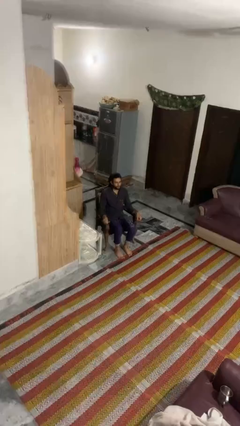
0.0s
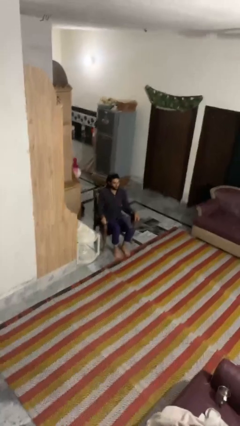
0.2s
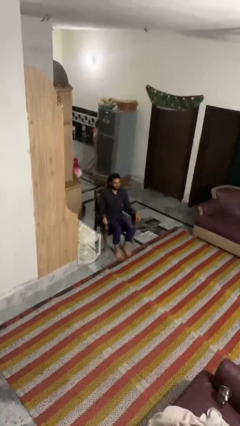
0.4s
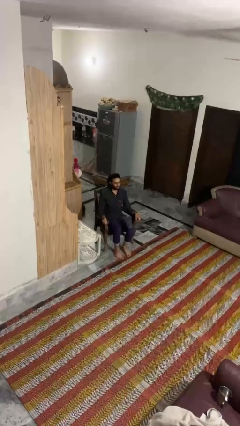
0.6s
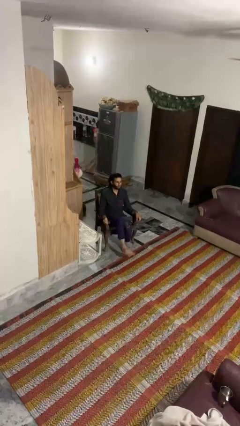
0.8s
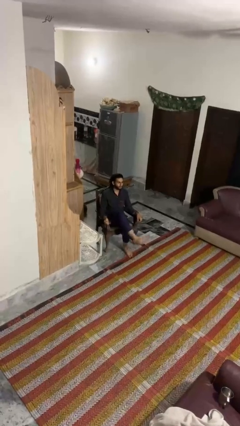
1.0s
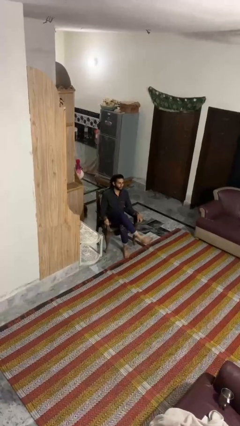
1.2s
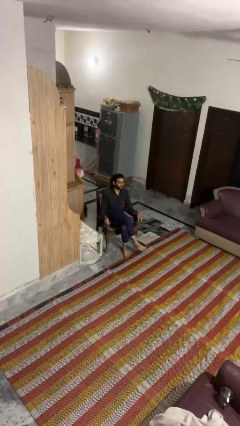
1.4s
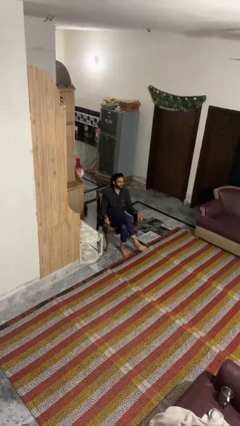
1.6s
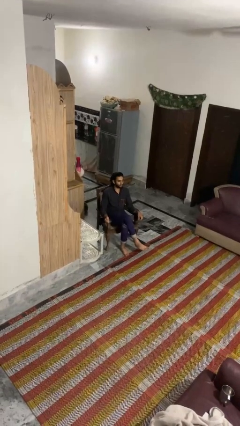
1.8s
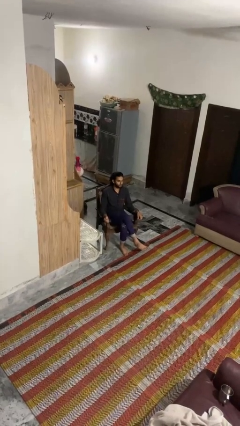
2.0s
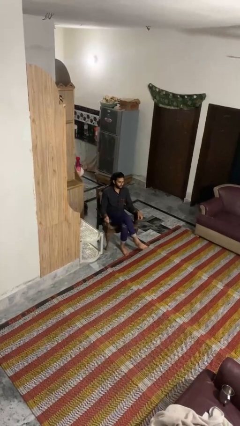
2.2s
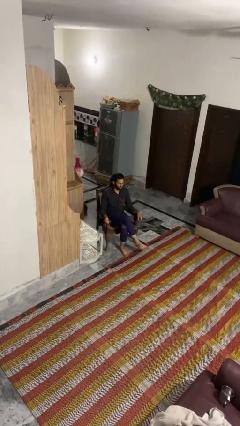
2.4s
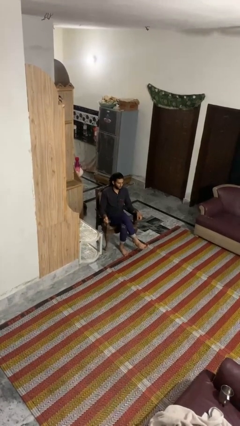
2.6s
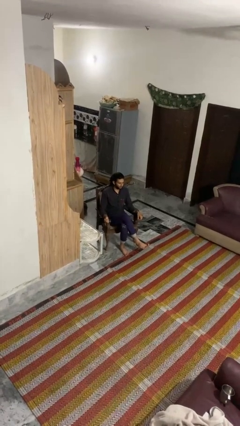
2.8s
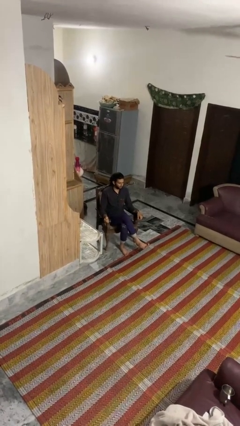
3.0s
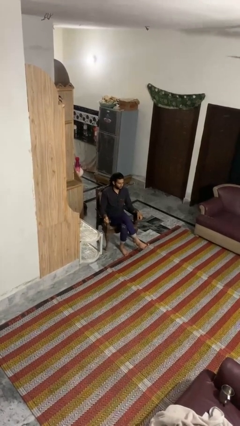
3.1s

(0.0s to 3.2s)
person crosses legs

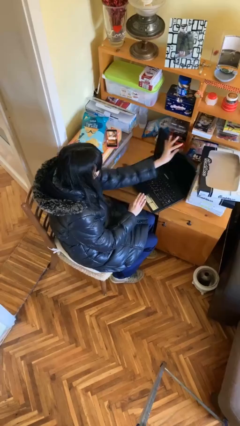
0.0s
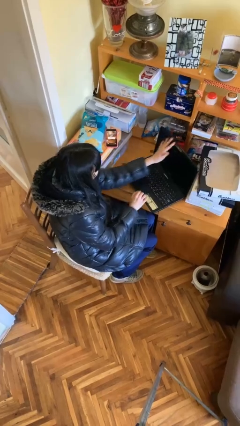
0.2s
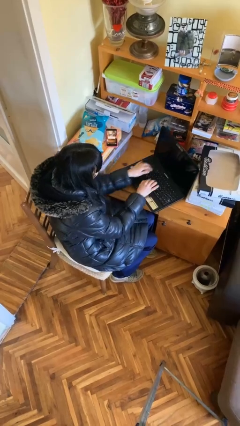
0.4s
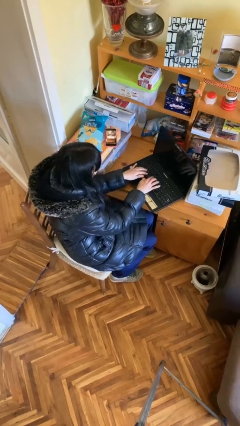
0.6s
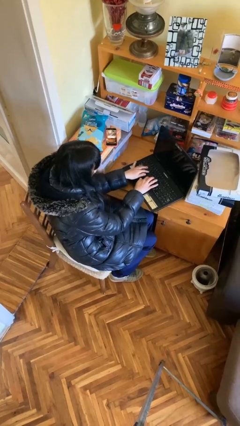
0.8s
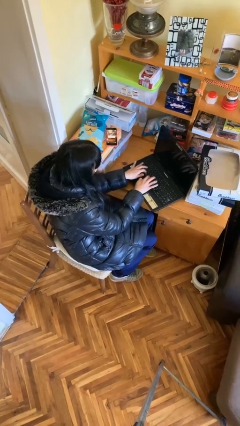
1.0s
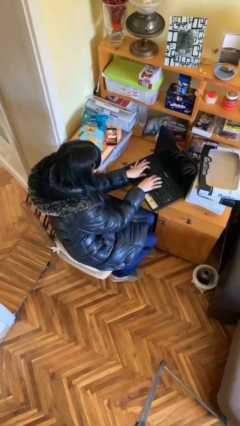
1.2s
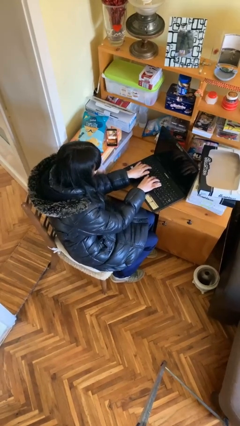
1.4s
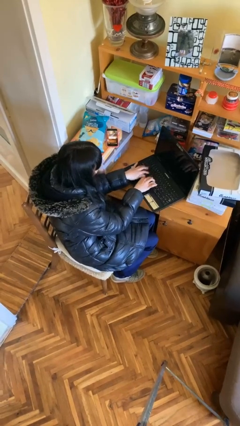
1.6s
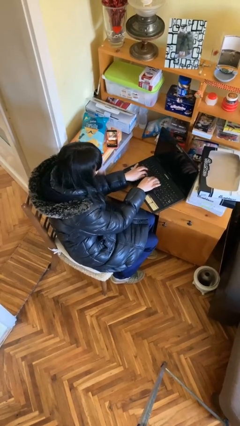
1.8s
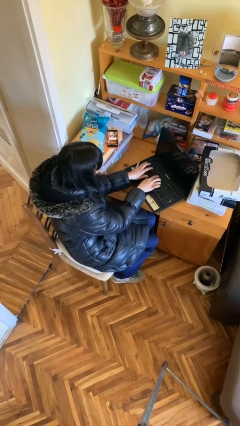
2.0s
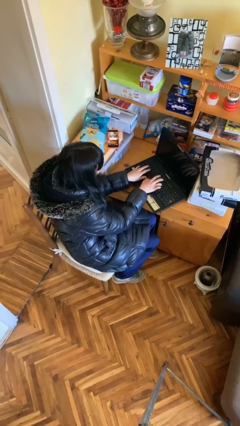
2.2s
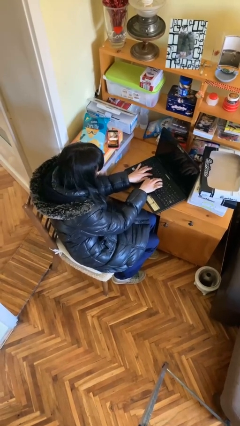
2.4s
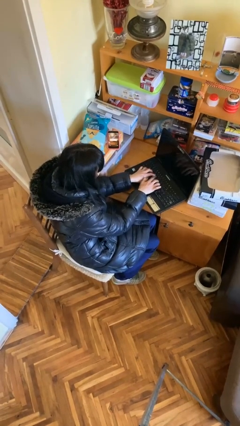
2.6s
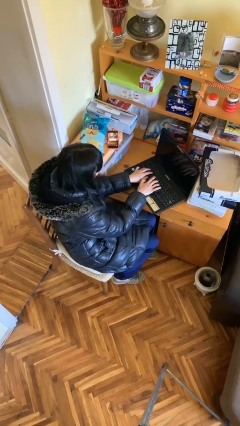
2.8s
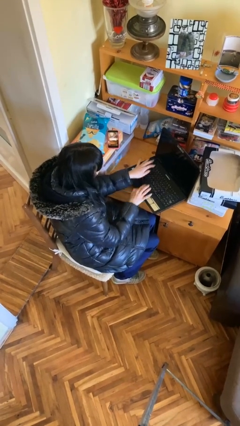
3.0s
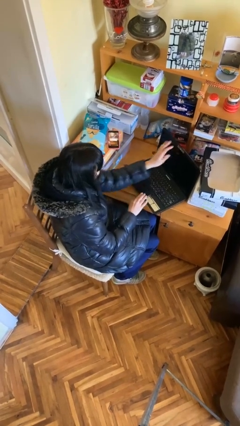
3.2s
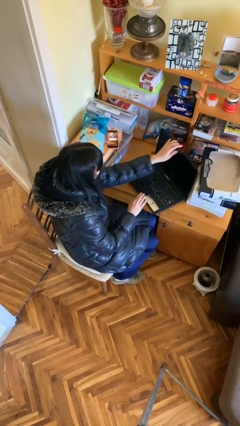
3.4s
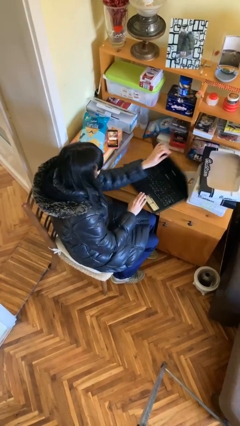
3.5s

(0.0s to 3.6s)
person interacts with laptop

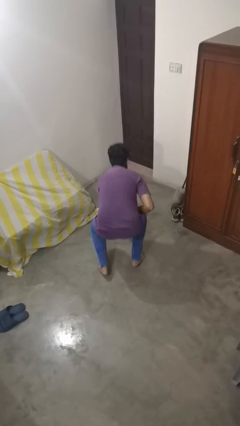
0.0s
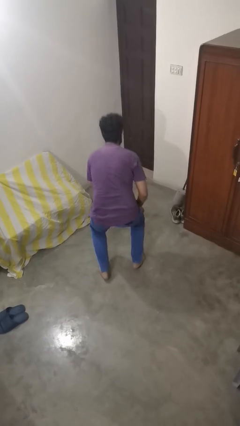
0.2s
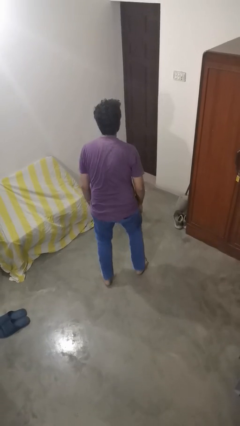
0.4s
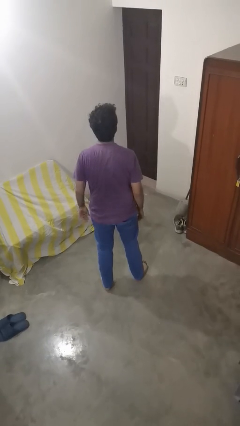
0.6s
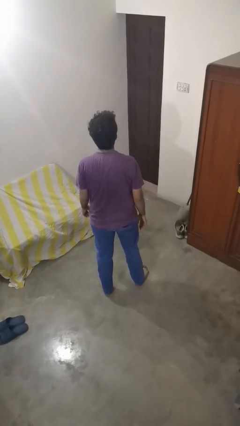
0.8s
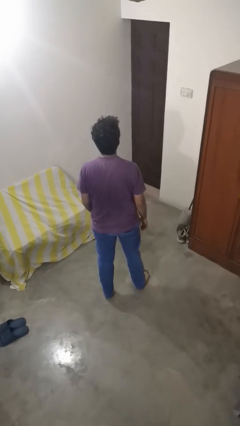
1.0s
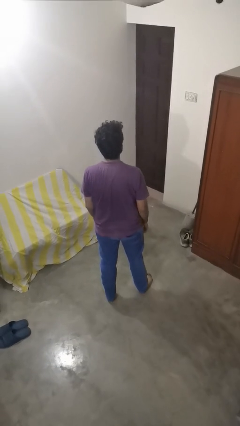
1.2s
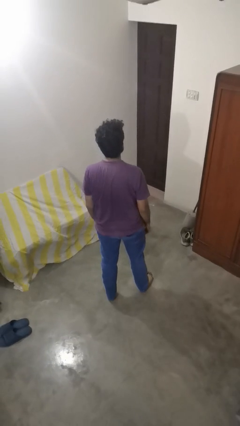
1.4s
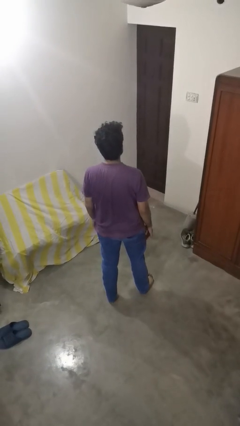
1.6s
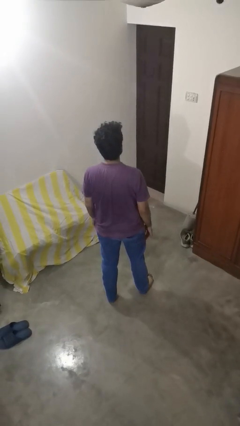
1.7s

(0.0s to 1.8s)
person stands up from floor

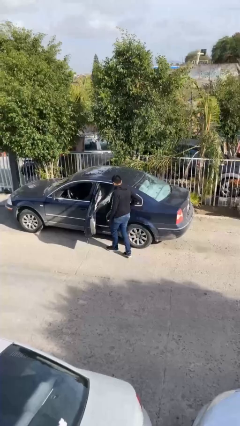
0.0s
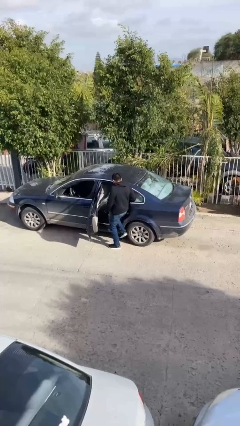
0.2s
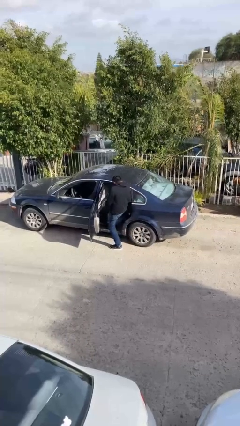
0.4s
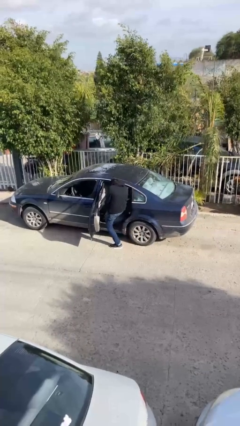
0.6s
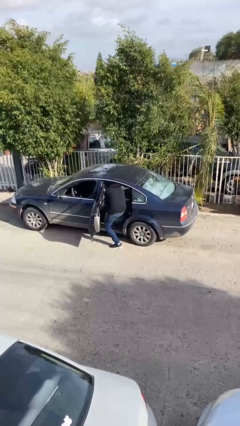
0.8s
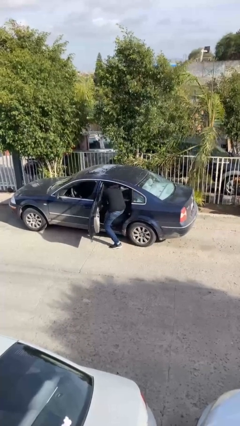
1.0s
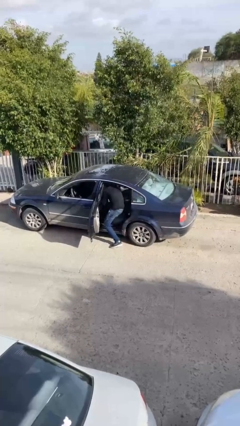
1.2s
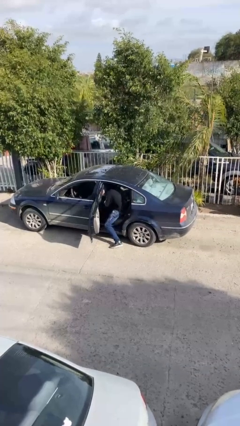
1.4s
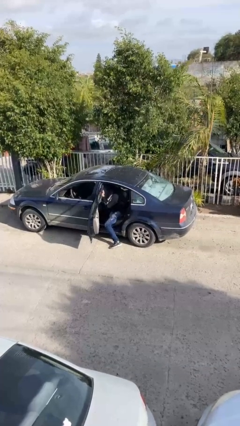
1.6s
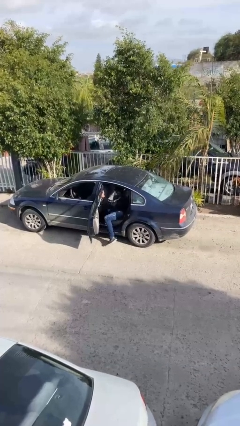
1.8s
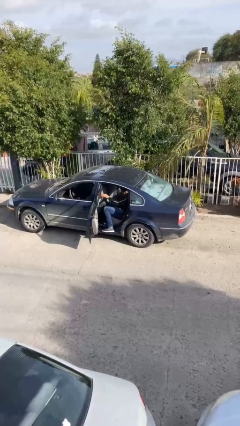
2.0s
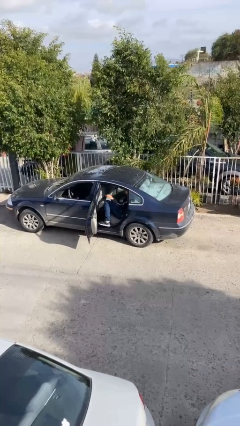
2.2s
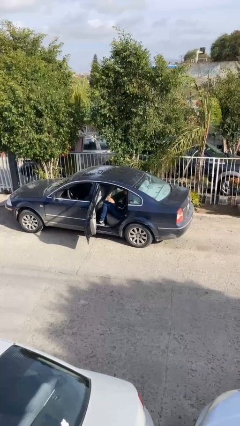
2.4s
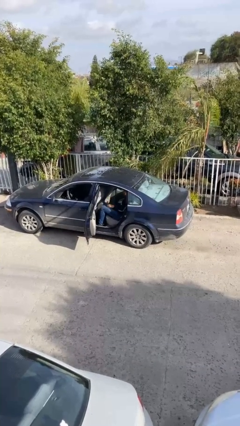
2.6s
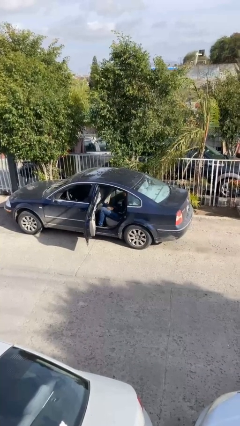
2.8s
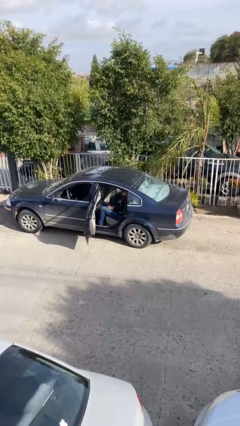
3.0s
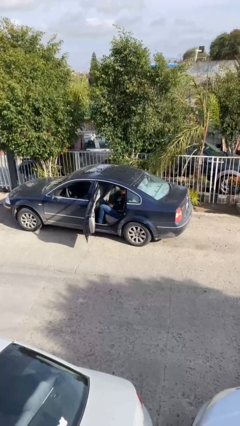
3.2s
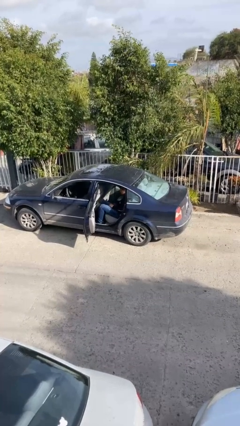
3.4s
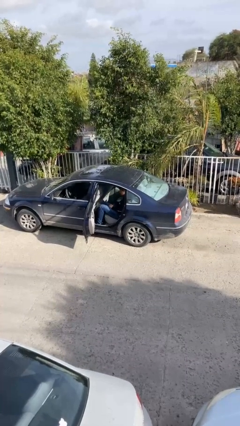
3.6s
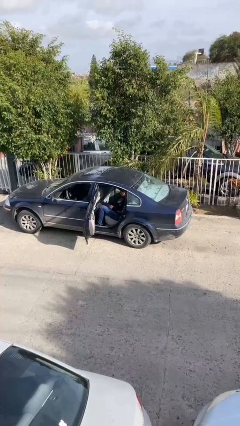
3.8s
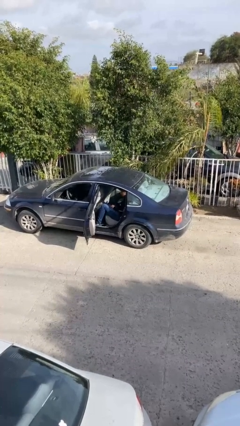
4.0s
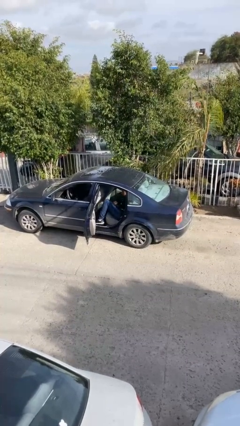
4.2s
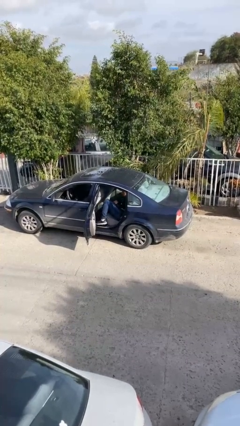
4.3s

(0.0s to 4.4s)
person enters car

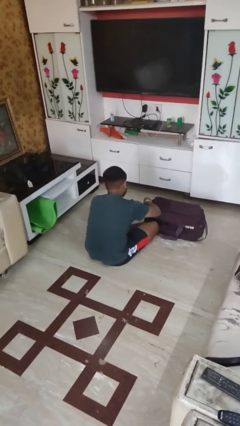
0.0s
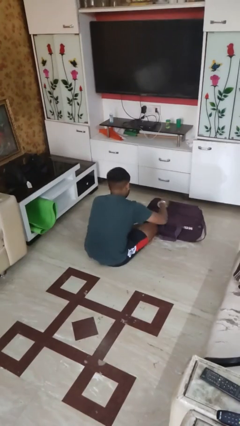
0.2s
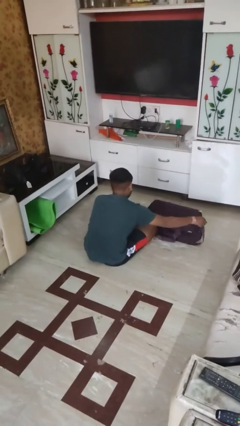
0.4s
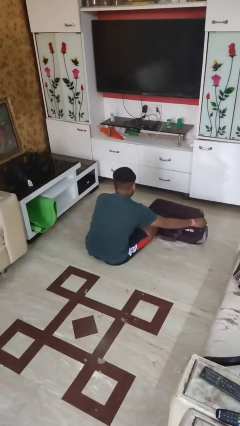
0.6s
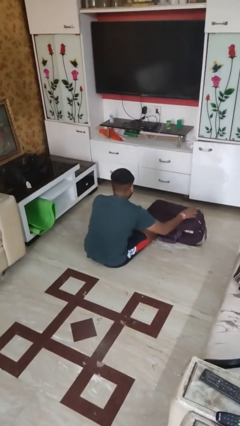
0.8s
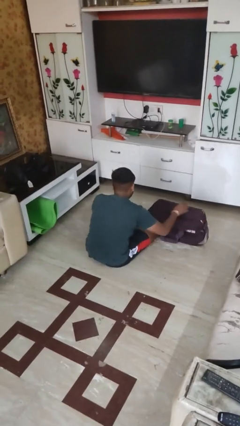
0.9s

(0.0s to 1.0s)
person opens suitcase

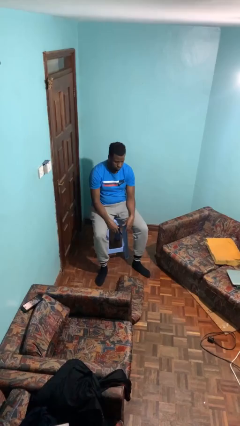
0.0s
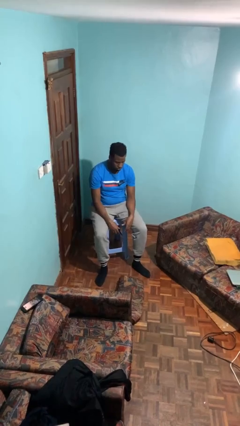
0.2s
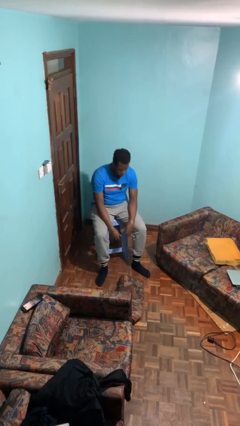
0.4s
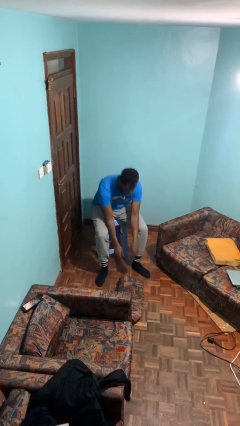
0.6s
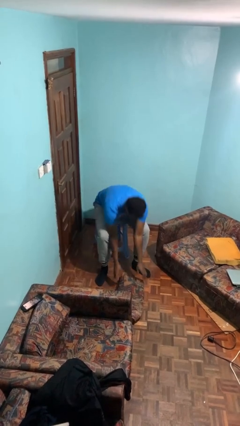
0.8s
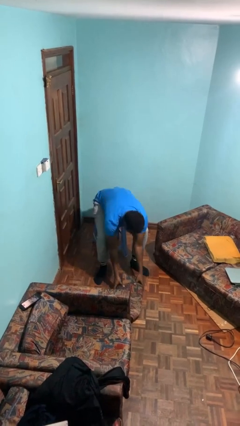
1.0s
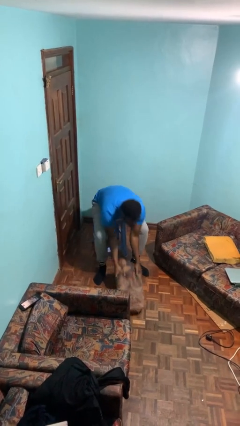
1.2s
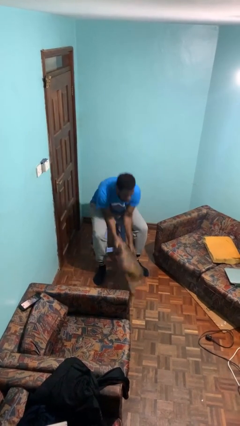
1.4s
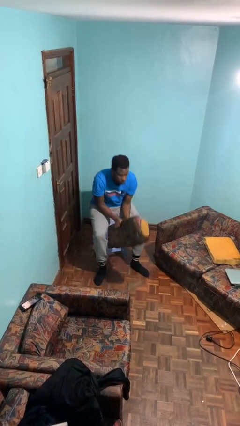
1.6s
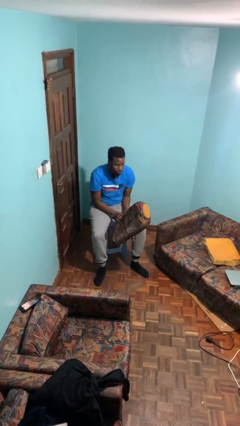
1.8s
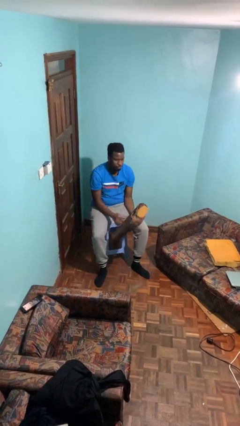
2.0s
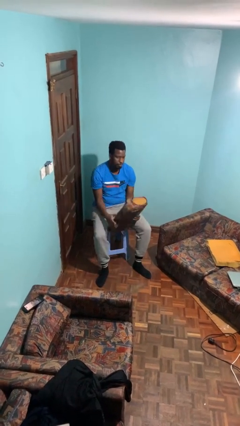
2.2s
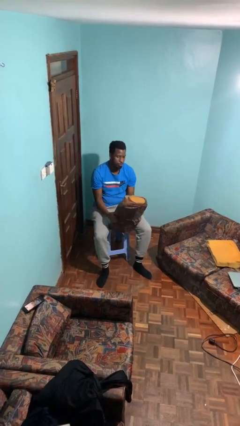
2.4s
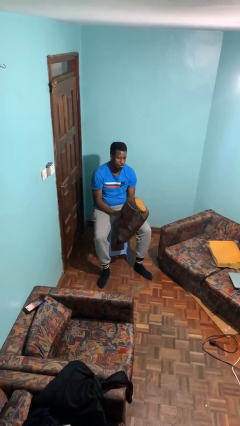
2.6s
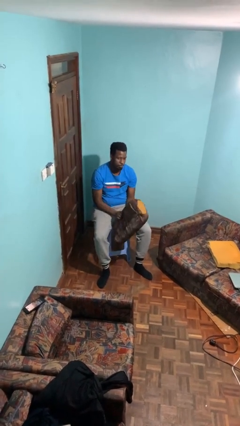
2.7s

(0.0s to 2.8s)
person picks up object from floor

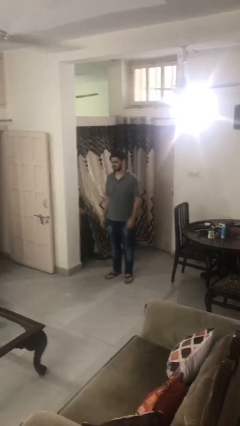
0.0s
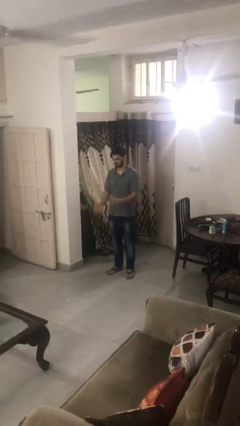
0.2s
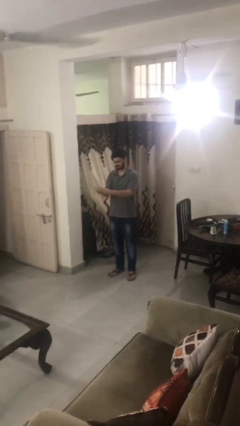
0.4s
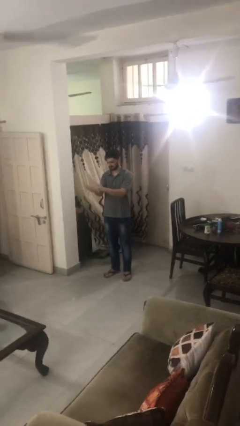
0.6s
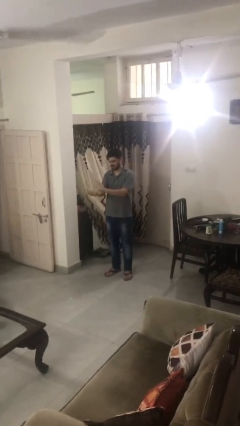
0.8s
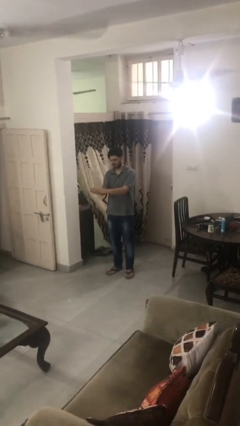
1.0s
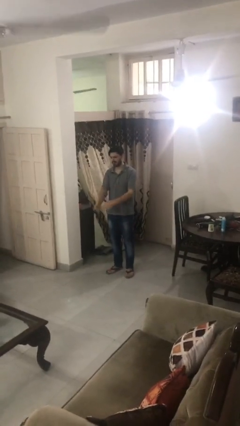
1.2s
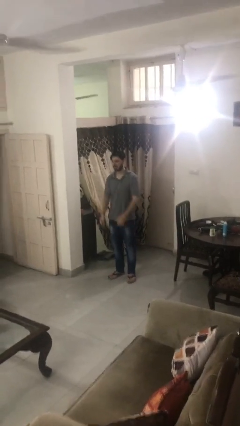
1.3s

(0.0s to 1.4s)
person claps hands
